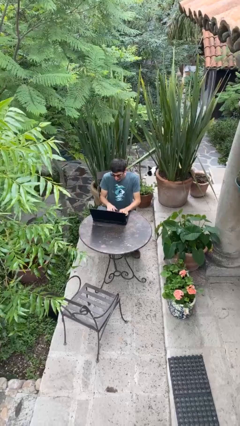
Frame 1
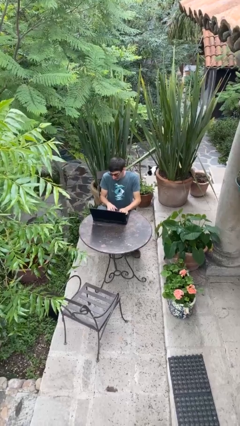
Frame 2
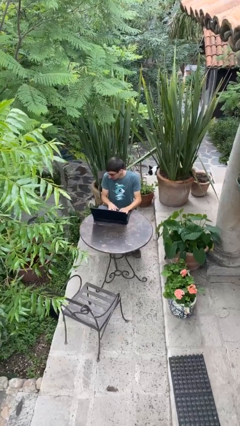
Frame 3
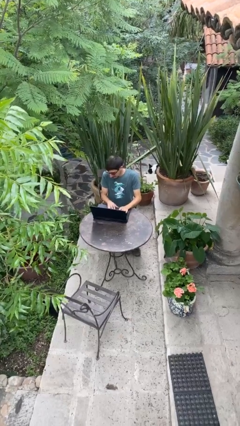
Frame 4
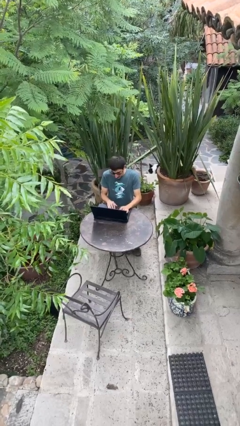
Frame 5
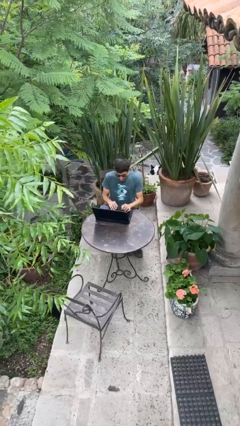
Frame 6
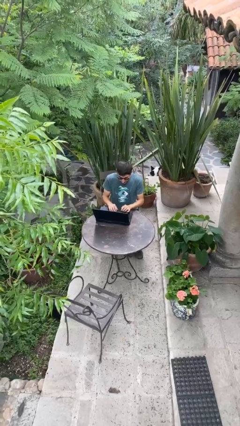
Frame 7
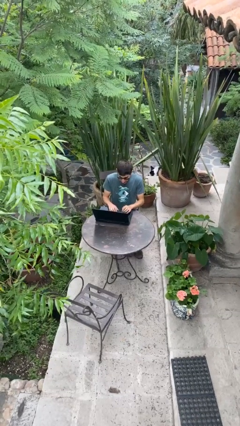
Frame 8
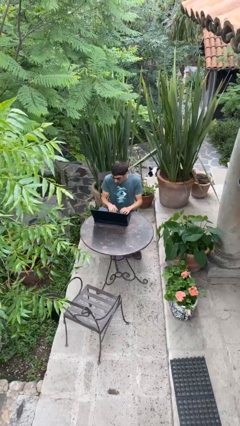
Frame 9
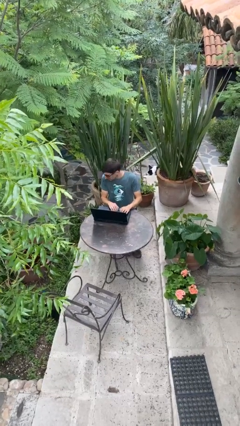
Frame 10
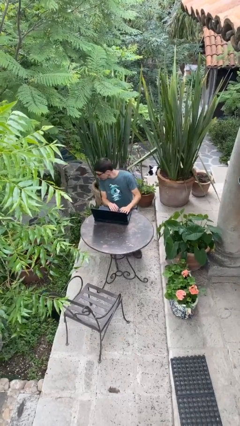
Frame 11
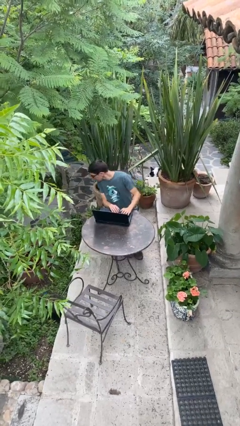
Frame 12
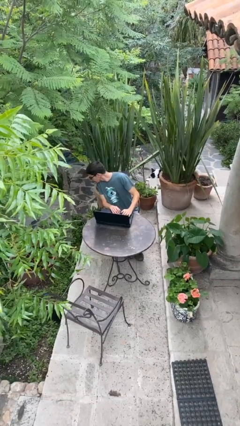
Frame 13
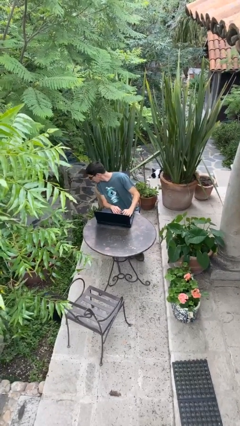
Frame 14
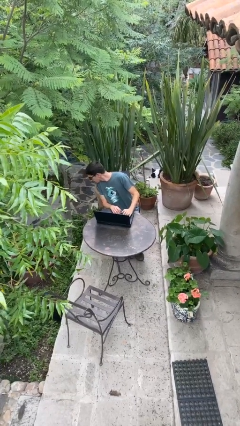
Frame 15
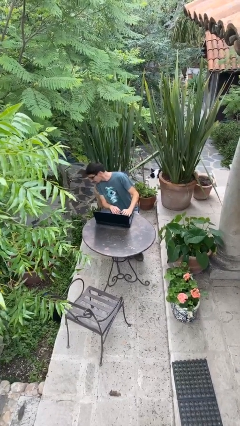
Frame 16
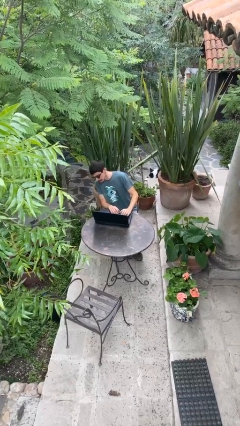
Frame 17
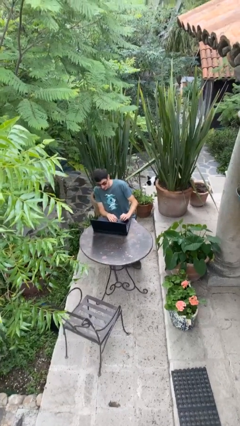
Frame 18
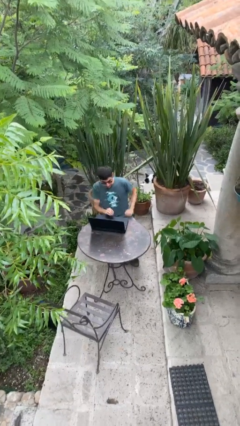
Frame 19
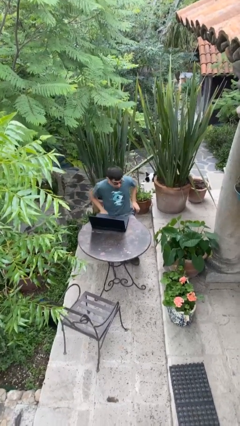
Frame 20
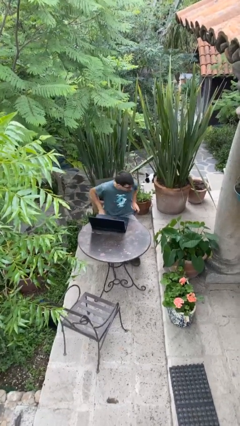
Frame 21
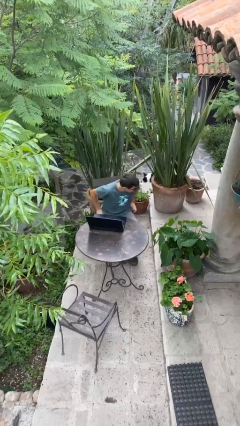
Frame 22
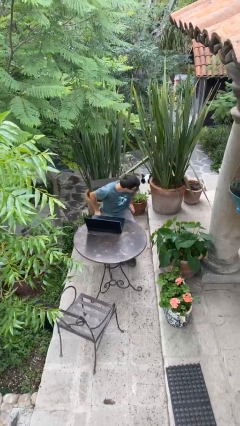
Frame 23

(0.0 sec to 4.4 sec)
person interacts with laptop

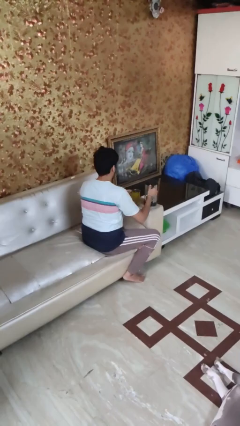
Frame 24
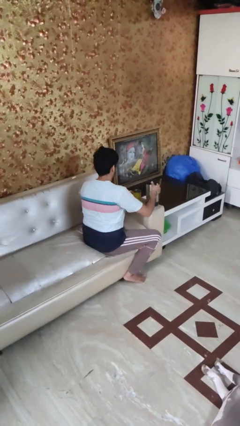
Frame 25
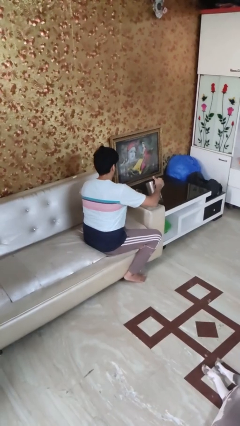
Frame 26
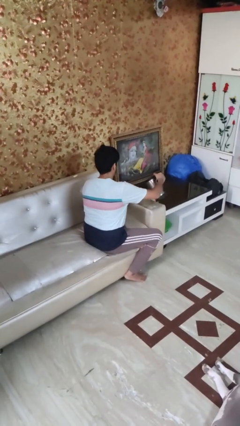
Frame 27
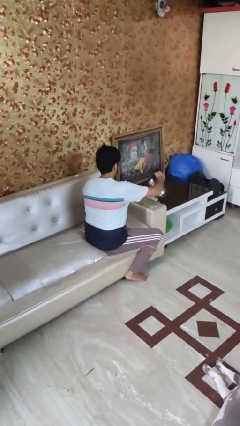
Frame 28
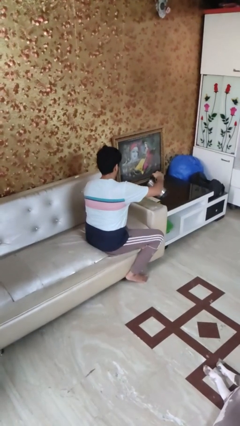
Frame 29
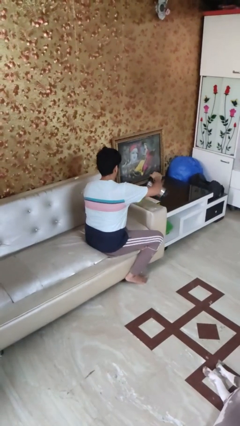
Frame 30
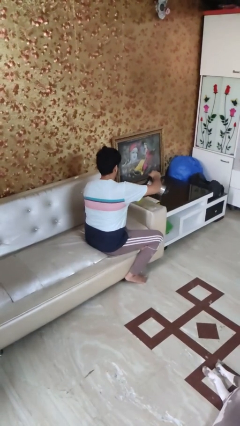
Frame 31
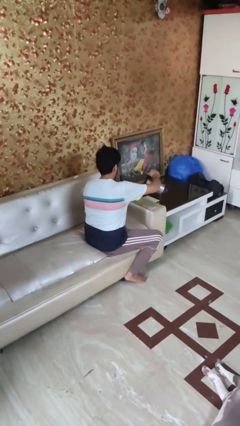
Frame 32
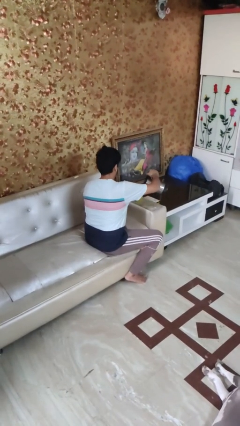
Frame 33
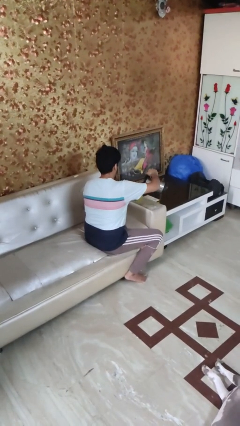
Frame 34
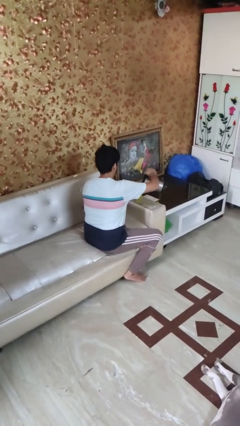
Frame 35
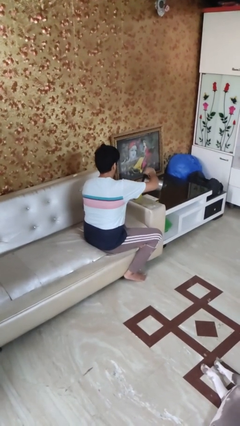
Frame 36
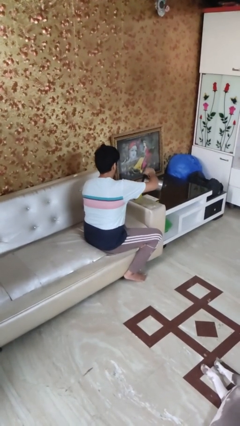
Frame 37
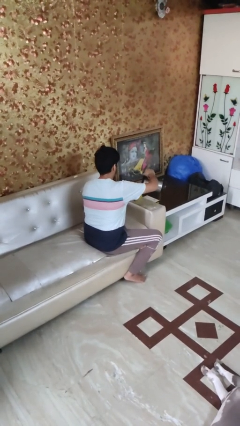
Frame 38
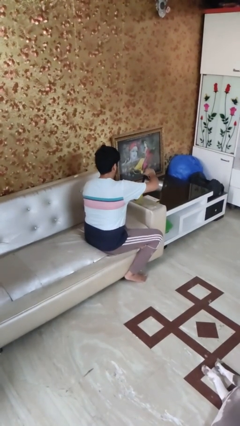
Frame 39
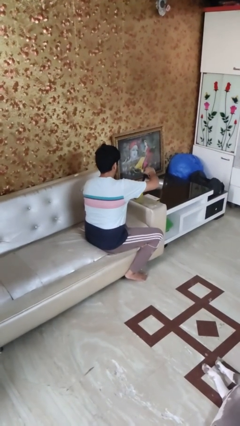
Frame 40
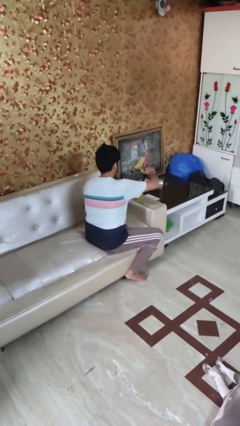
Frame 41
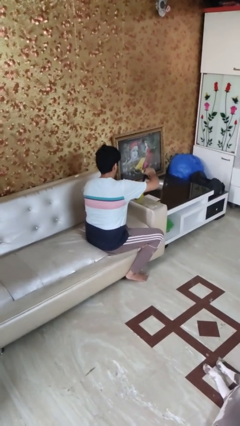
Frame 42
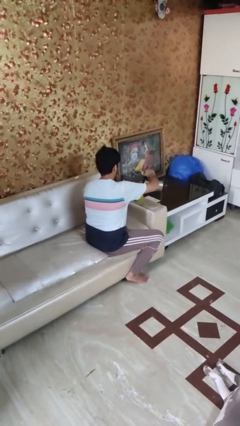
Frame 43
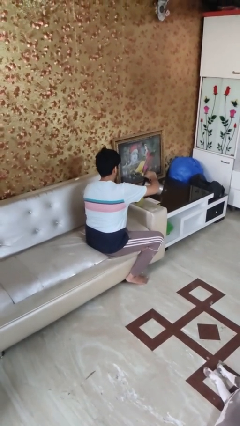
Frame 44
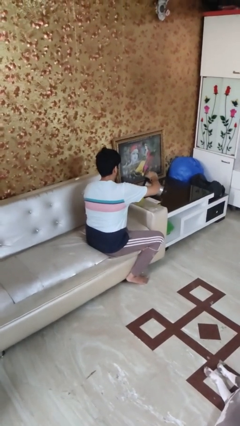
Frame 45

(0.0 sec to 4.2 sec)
person pours coffee into mug

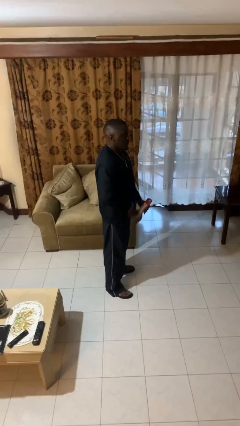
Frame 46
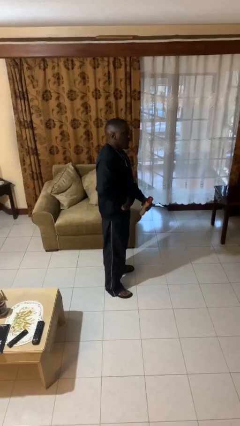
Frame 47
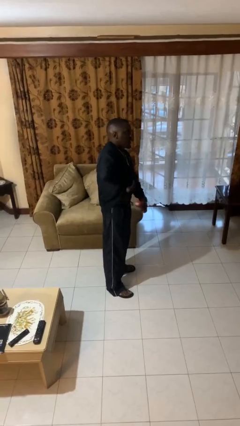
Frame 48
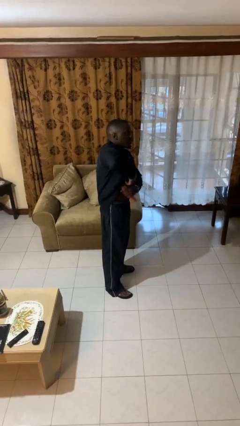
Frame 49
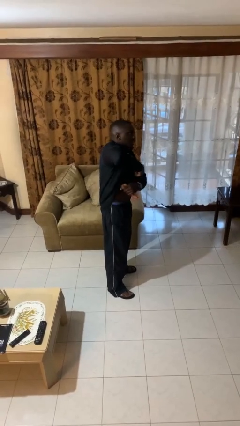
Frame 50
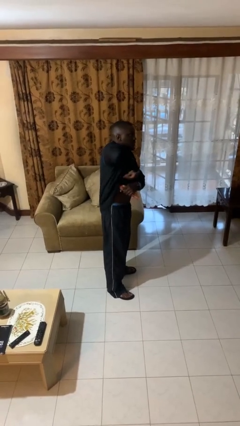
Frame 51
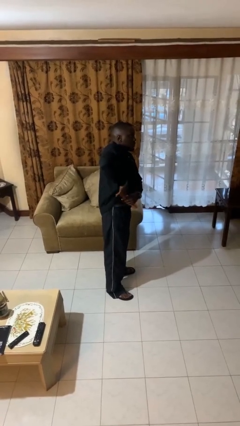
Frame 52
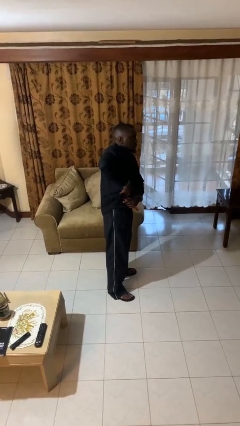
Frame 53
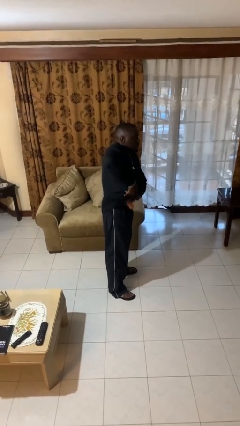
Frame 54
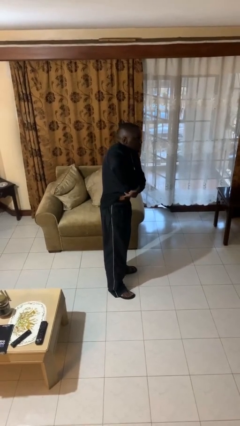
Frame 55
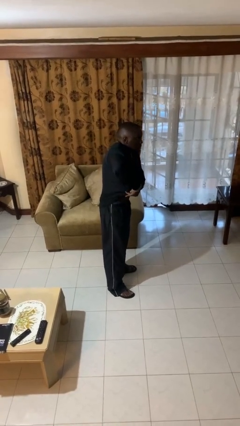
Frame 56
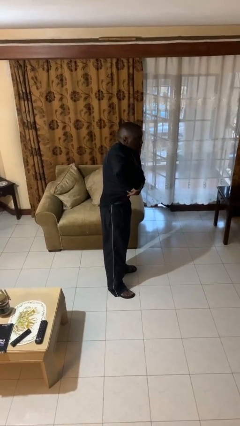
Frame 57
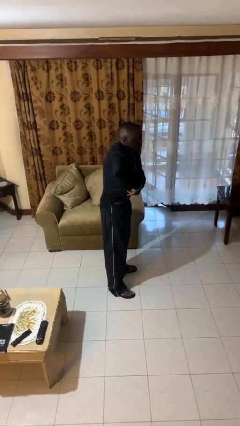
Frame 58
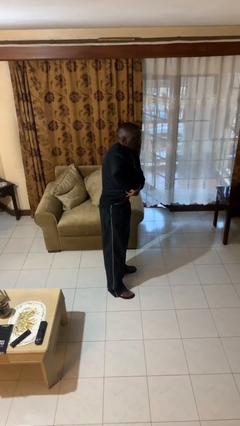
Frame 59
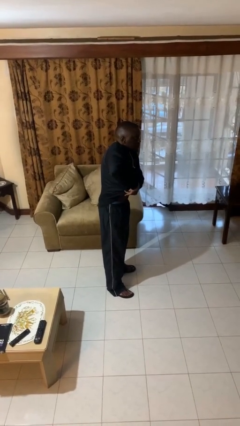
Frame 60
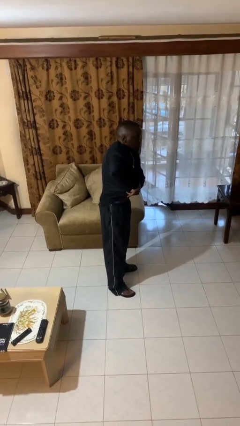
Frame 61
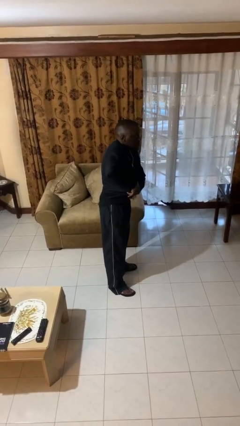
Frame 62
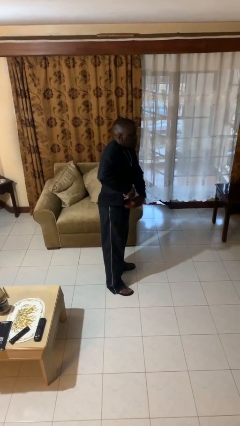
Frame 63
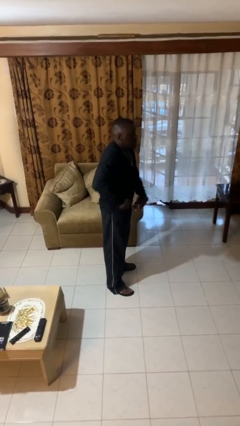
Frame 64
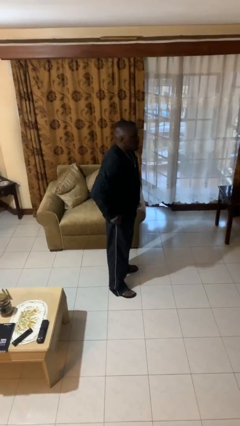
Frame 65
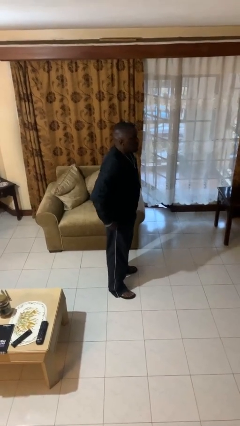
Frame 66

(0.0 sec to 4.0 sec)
person applies deodorant

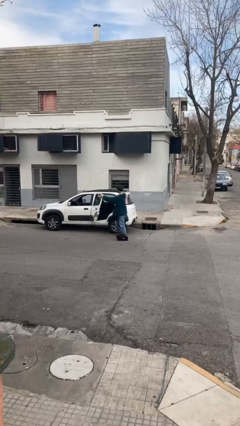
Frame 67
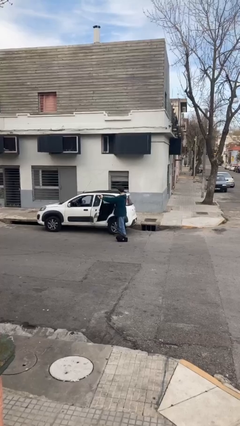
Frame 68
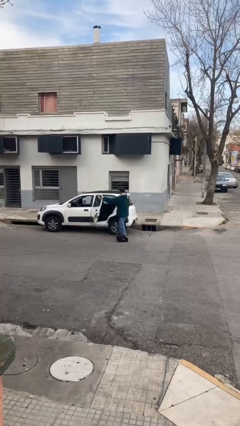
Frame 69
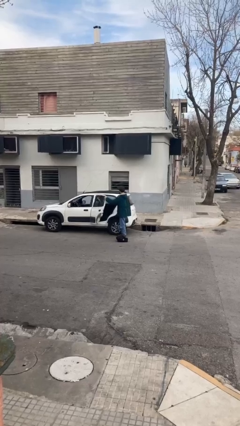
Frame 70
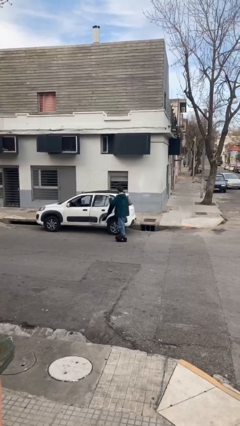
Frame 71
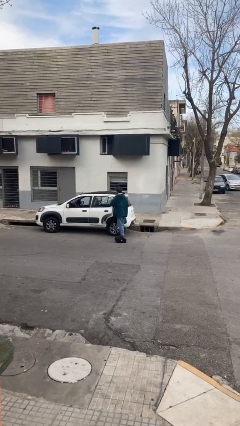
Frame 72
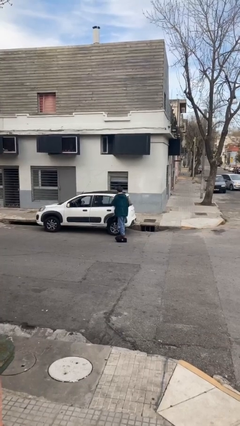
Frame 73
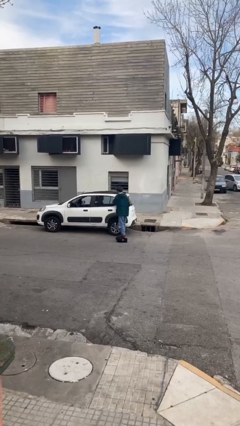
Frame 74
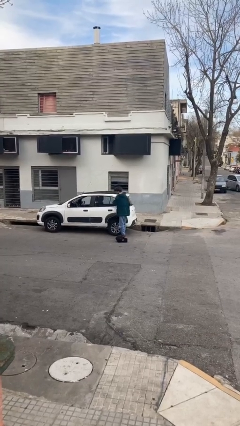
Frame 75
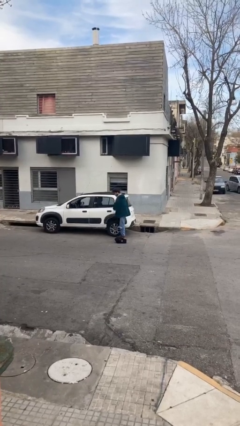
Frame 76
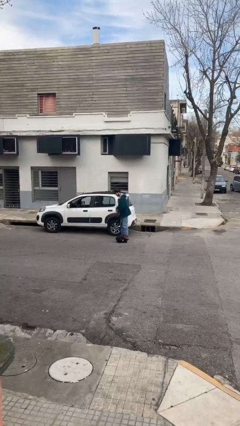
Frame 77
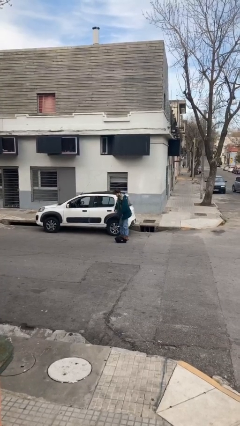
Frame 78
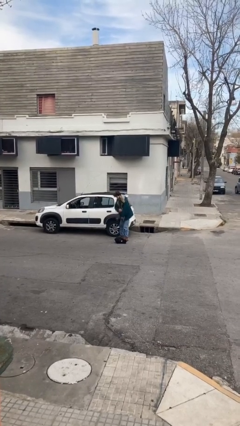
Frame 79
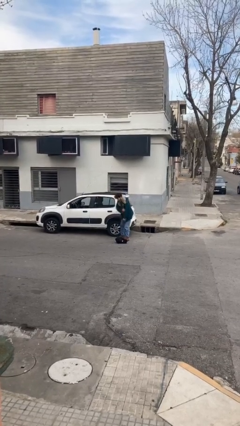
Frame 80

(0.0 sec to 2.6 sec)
person closes car door

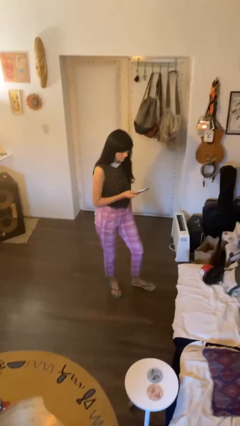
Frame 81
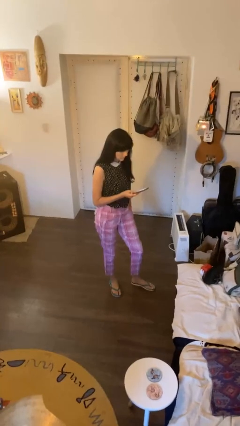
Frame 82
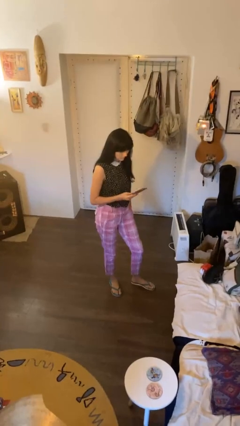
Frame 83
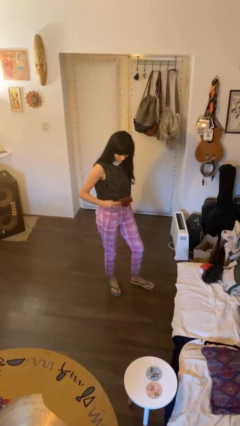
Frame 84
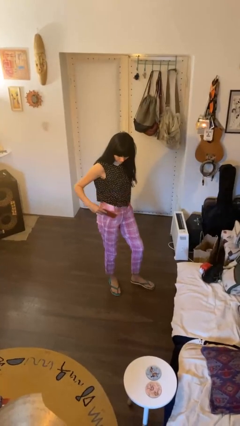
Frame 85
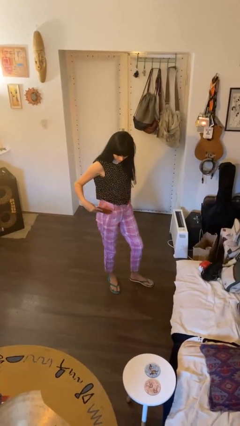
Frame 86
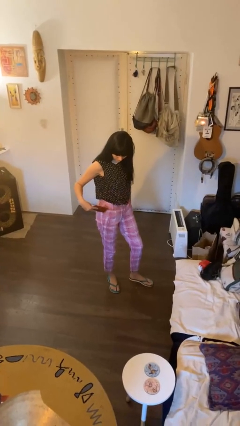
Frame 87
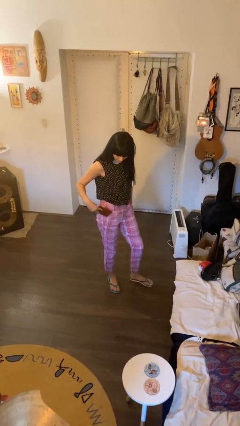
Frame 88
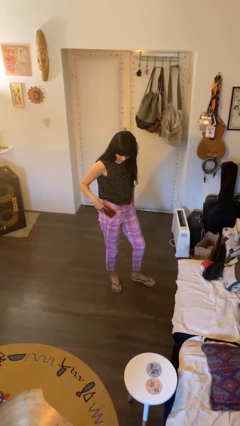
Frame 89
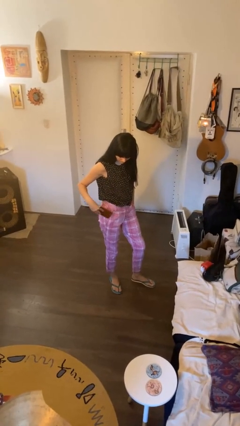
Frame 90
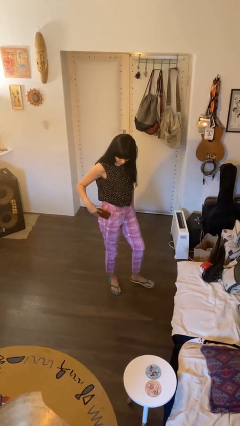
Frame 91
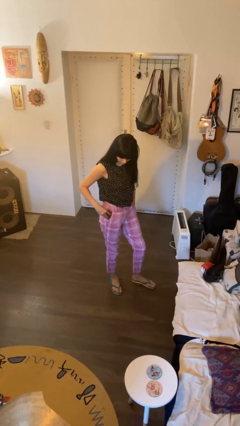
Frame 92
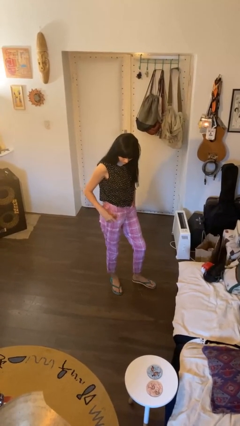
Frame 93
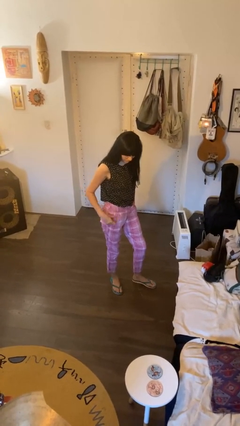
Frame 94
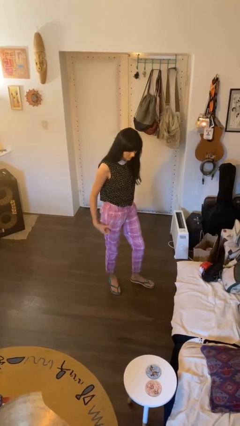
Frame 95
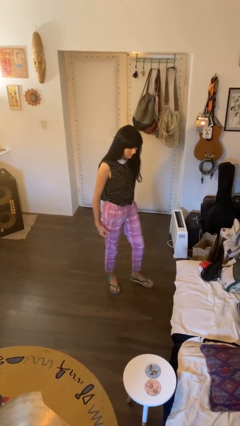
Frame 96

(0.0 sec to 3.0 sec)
person puts phone into pocket
